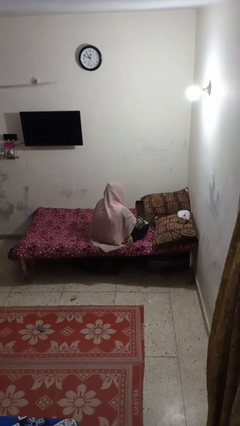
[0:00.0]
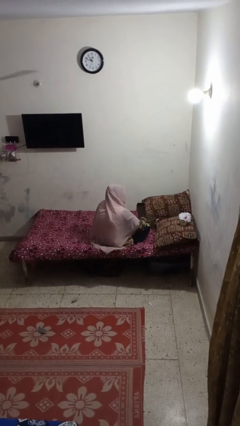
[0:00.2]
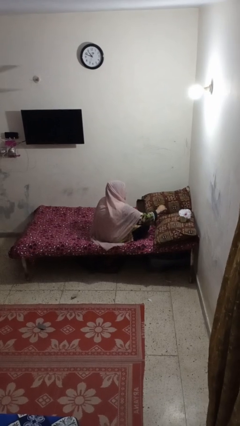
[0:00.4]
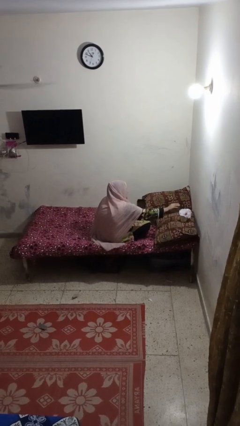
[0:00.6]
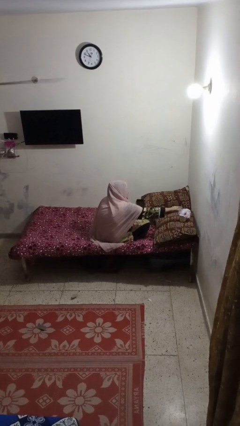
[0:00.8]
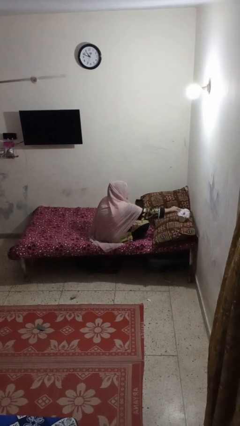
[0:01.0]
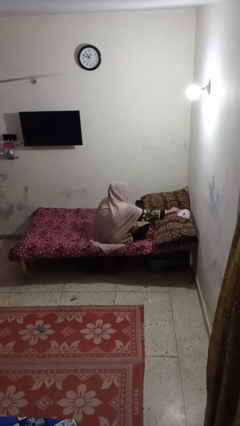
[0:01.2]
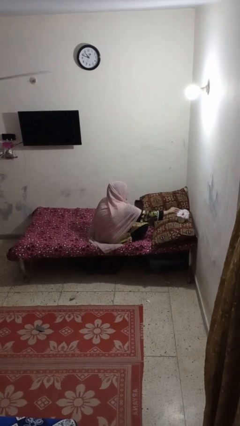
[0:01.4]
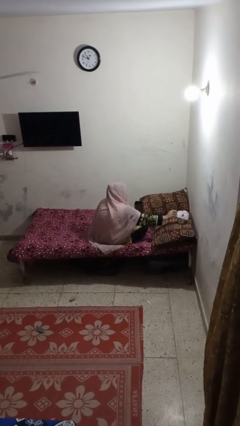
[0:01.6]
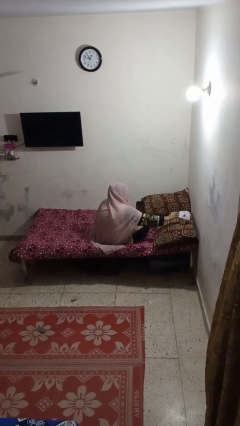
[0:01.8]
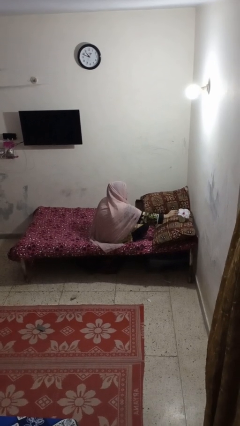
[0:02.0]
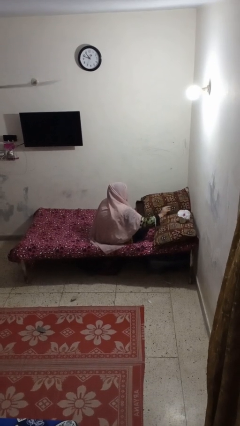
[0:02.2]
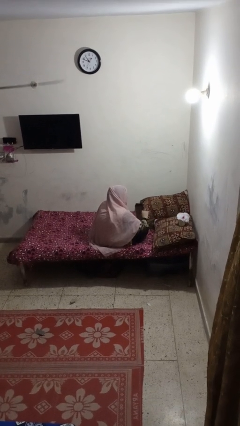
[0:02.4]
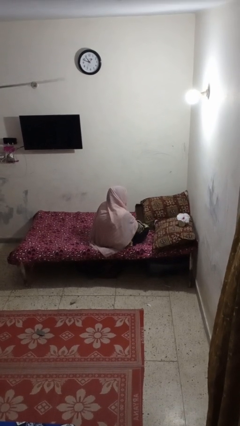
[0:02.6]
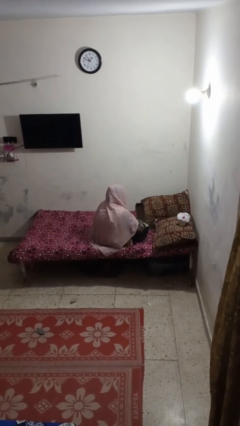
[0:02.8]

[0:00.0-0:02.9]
person arranges flowers in vase

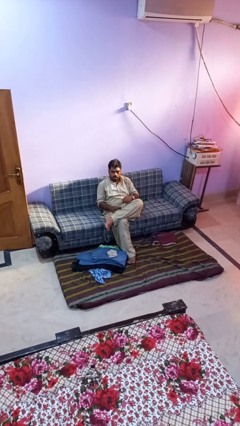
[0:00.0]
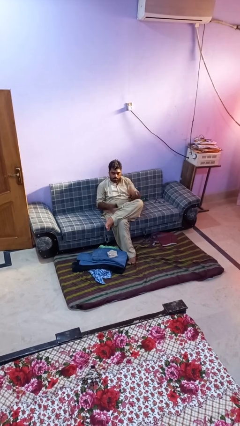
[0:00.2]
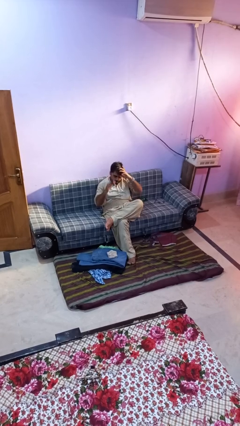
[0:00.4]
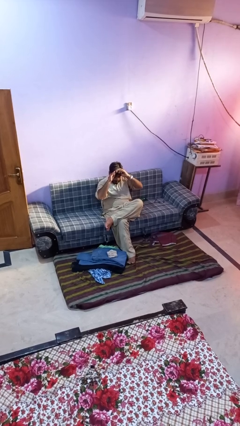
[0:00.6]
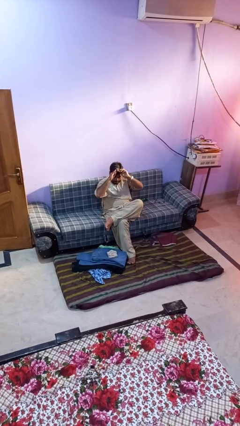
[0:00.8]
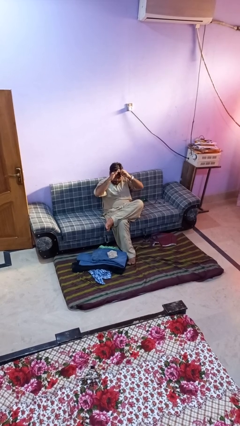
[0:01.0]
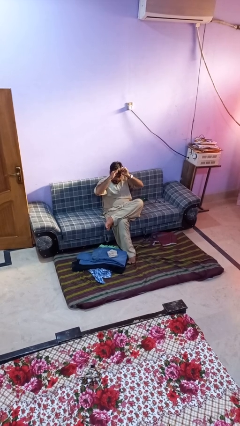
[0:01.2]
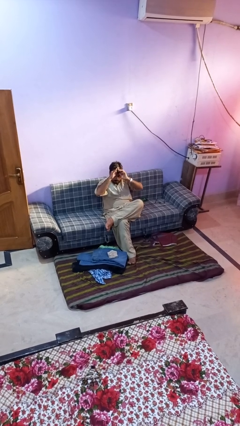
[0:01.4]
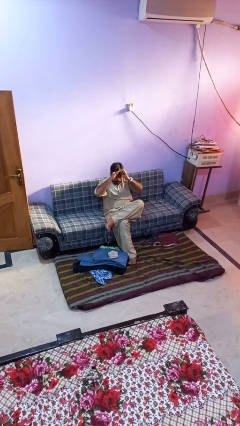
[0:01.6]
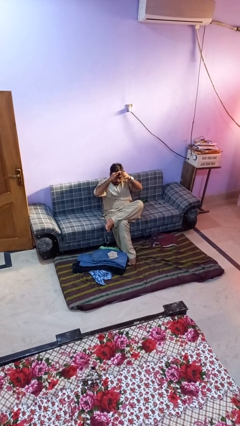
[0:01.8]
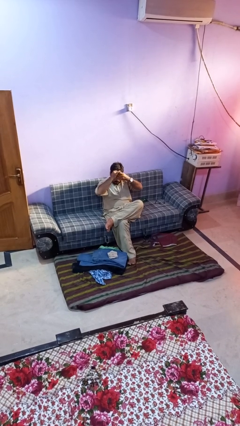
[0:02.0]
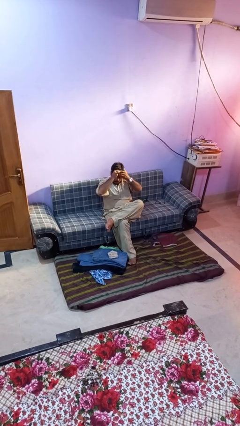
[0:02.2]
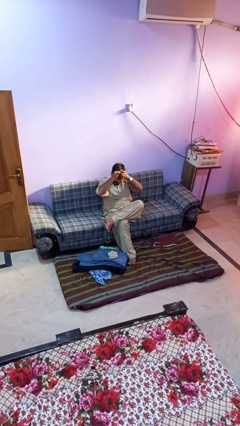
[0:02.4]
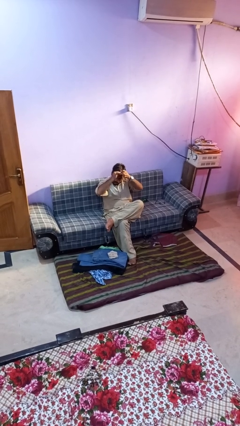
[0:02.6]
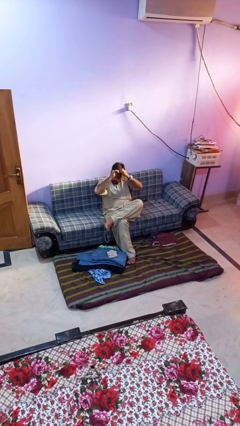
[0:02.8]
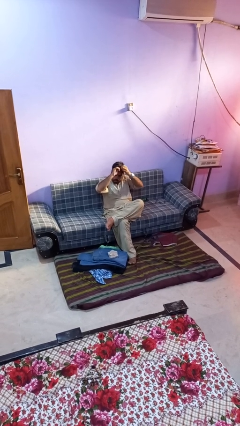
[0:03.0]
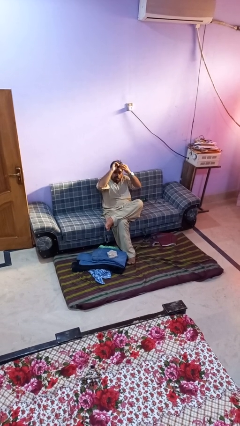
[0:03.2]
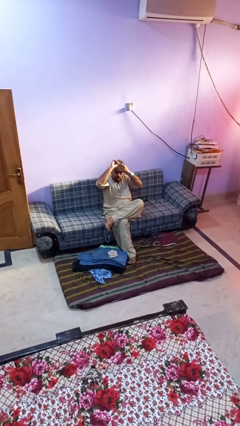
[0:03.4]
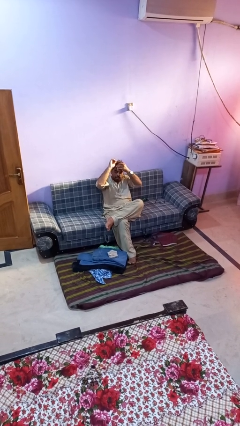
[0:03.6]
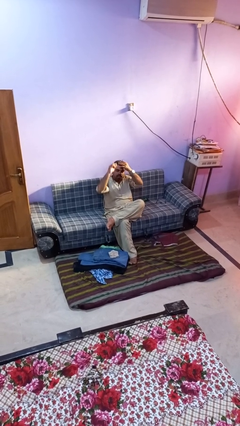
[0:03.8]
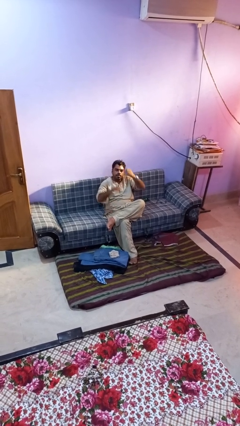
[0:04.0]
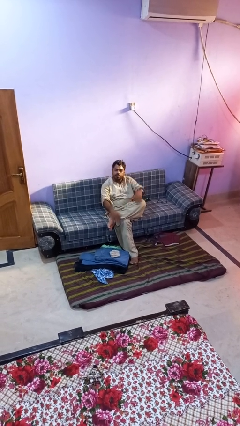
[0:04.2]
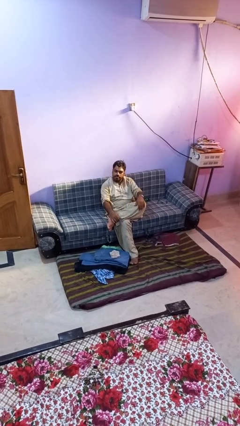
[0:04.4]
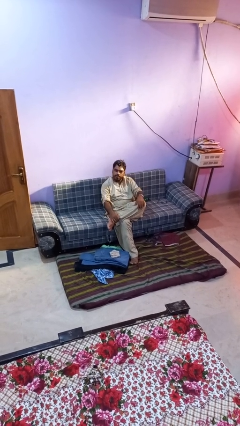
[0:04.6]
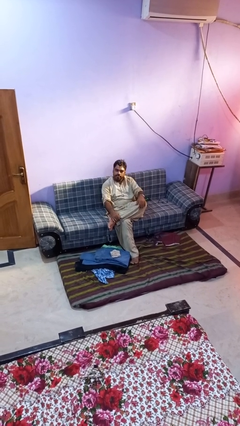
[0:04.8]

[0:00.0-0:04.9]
person puts hair in ponytail

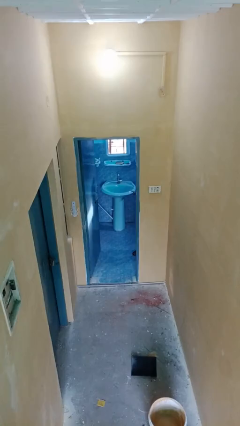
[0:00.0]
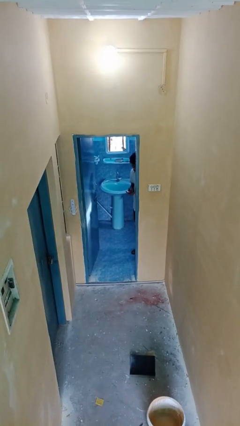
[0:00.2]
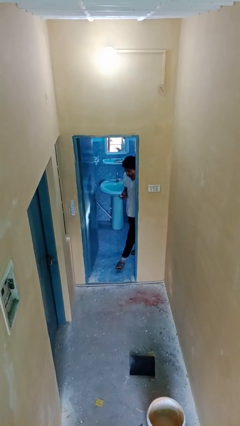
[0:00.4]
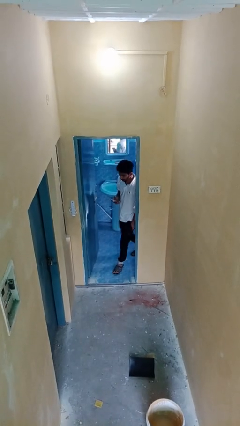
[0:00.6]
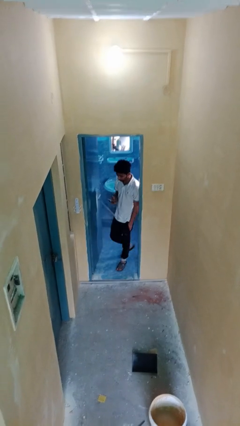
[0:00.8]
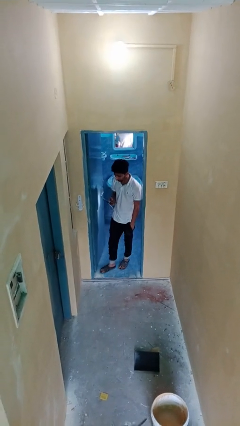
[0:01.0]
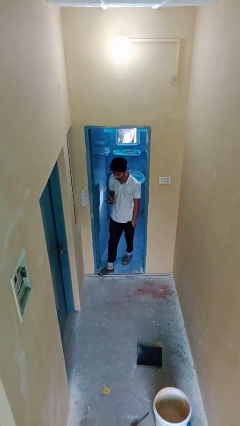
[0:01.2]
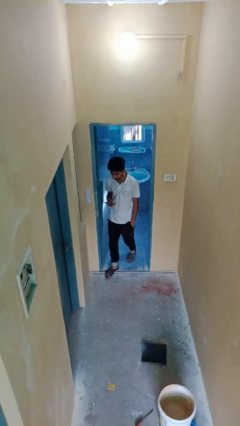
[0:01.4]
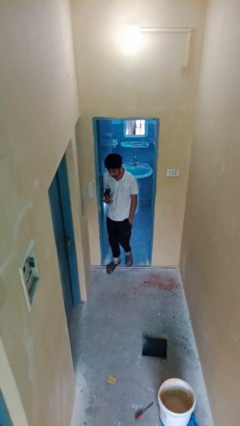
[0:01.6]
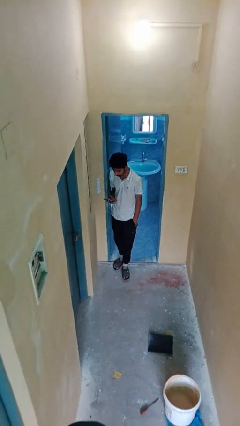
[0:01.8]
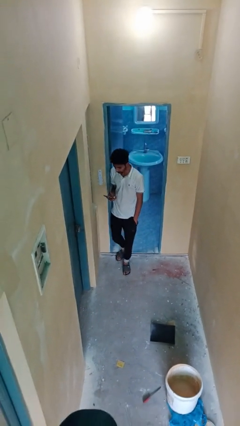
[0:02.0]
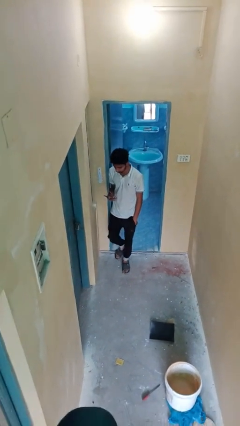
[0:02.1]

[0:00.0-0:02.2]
person enters scene through structure

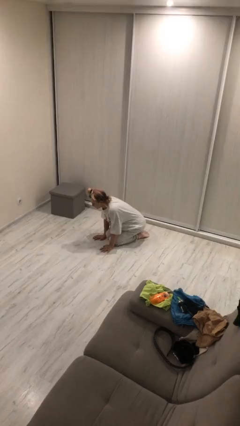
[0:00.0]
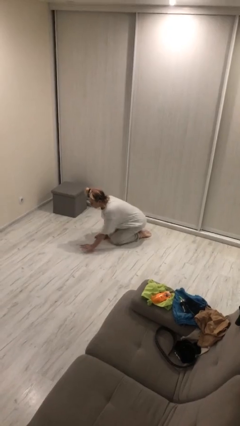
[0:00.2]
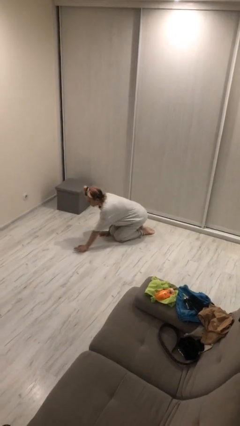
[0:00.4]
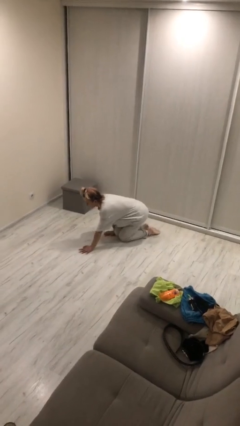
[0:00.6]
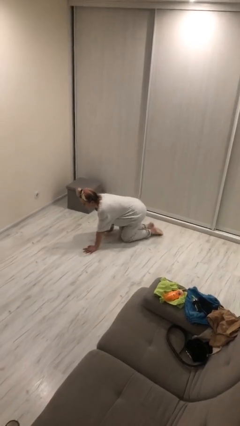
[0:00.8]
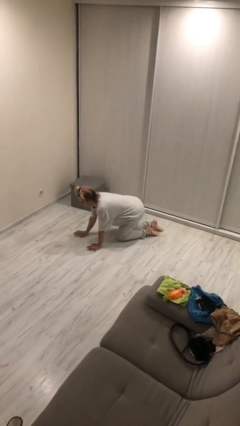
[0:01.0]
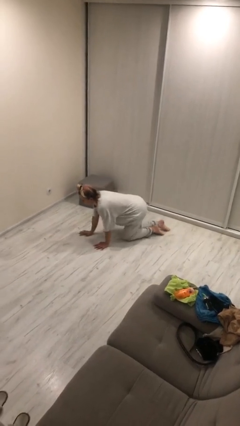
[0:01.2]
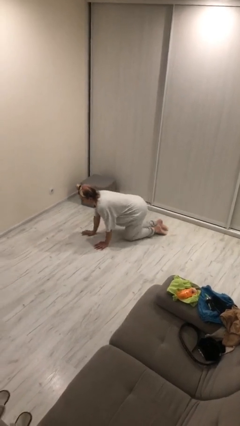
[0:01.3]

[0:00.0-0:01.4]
person crawls

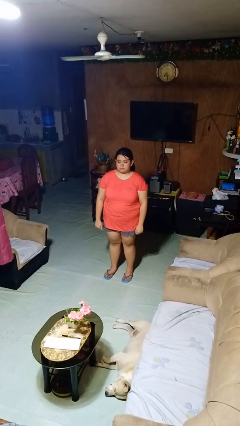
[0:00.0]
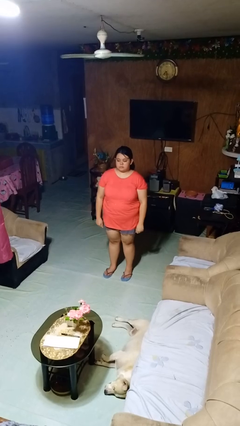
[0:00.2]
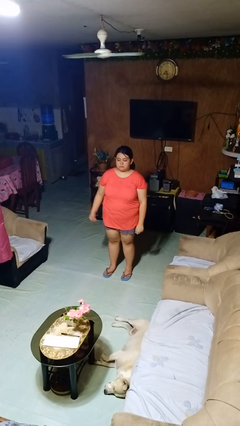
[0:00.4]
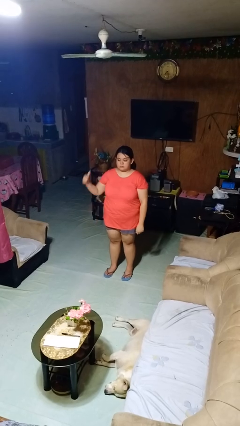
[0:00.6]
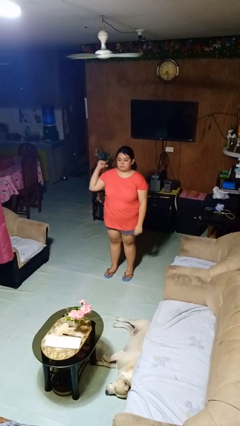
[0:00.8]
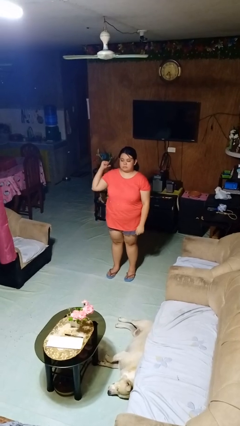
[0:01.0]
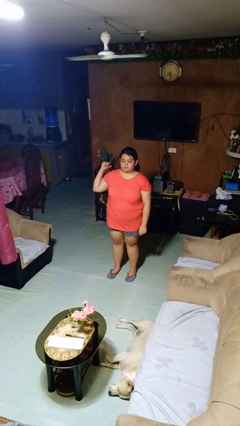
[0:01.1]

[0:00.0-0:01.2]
person gestures behind me

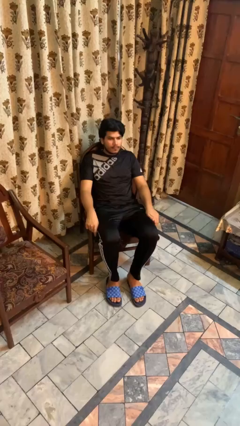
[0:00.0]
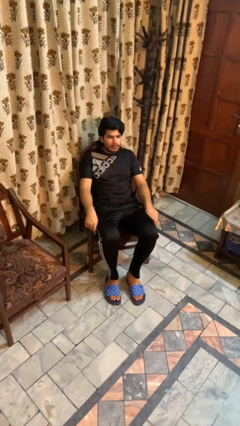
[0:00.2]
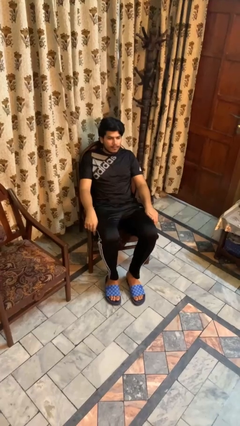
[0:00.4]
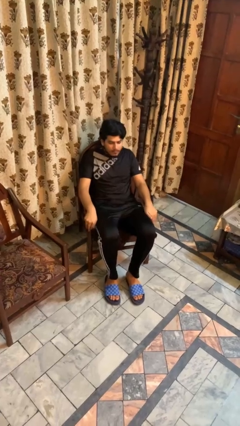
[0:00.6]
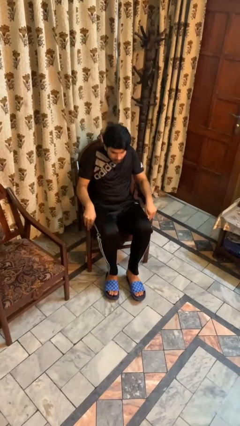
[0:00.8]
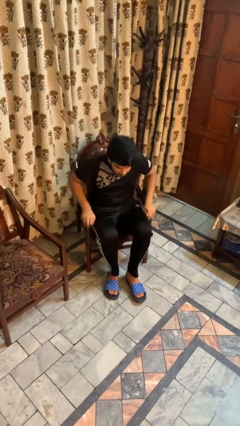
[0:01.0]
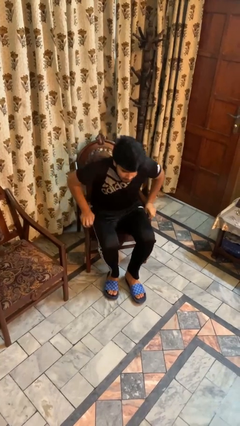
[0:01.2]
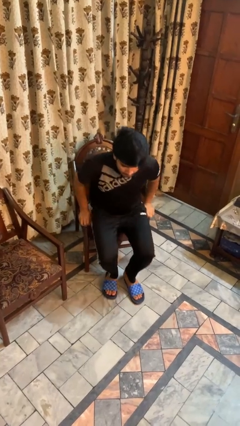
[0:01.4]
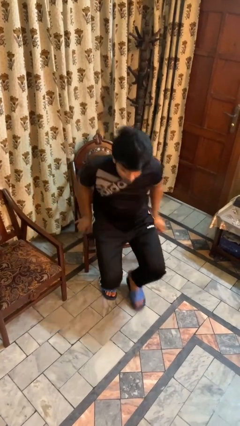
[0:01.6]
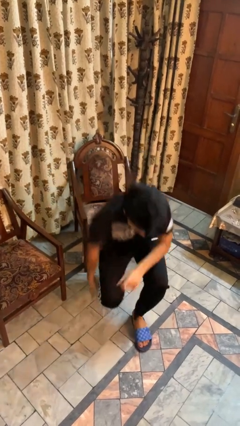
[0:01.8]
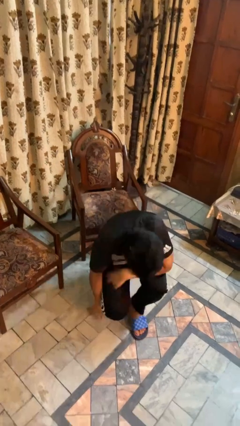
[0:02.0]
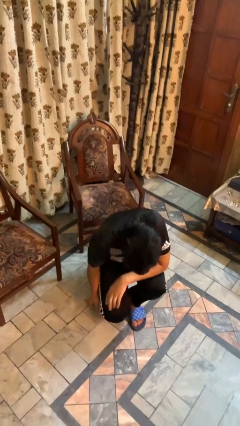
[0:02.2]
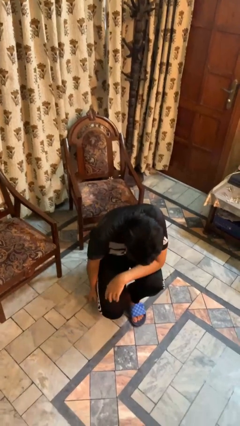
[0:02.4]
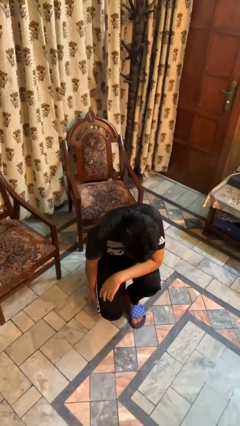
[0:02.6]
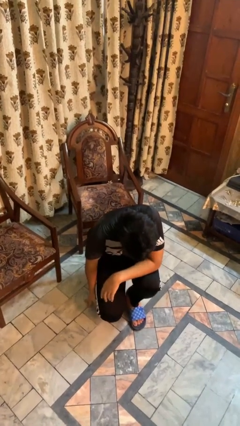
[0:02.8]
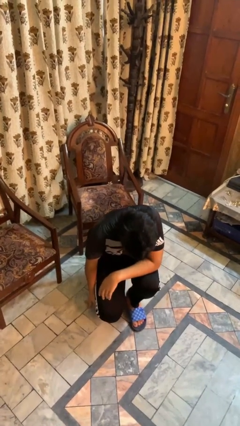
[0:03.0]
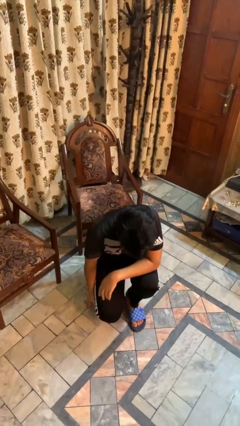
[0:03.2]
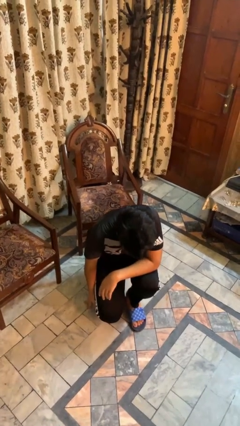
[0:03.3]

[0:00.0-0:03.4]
person falls from chair

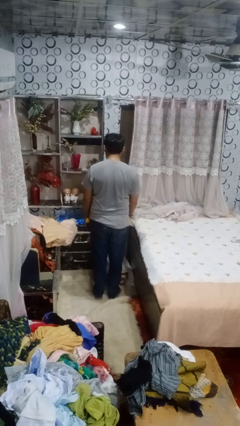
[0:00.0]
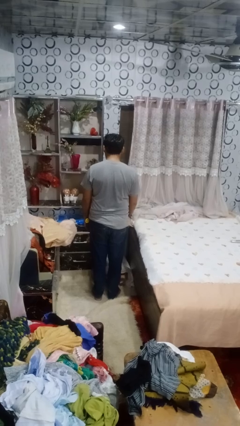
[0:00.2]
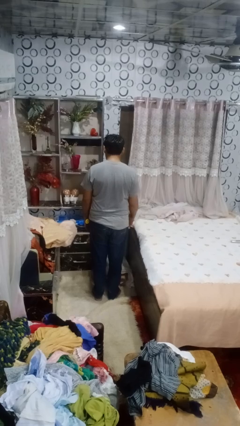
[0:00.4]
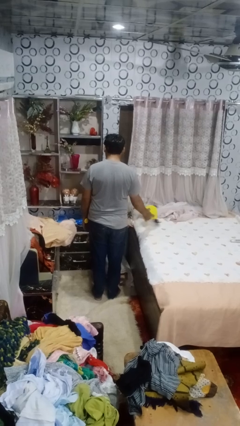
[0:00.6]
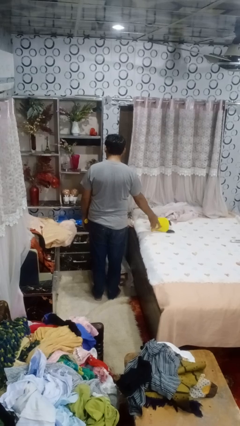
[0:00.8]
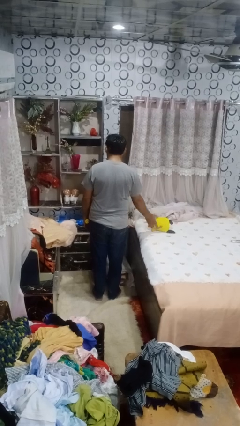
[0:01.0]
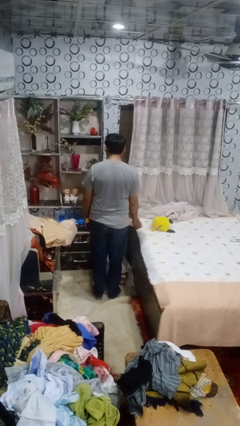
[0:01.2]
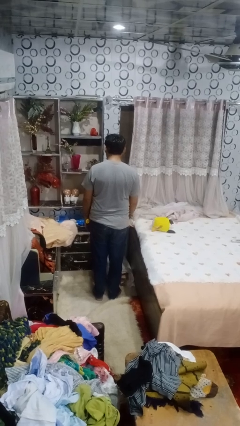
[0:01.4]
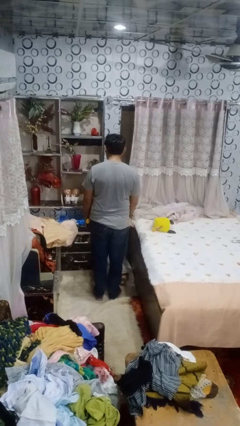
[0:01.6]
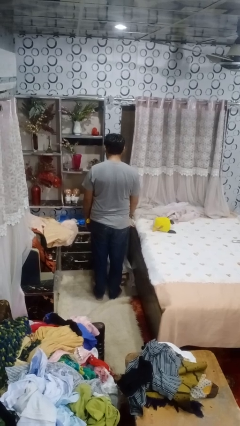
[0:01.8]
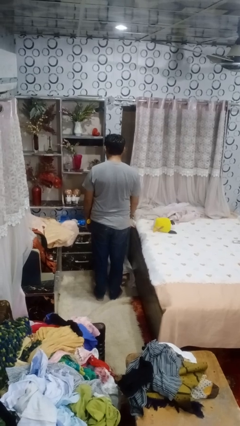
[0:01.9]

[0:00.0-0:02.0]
person throws object on bed
